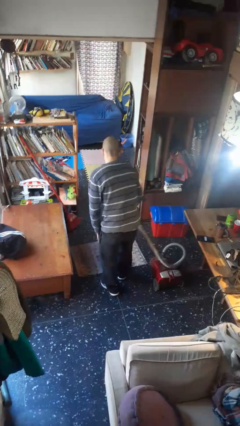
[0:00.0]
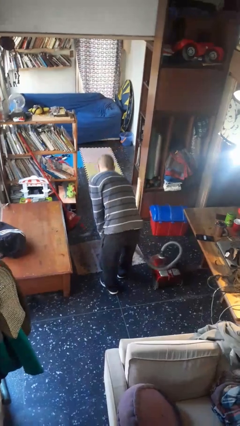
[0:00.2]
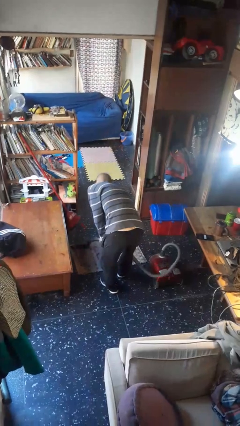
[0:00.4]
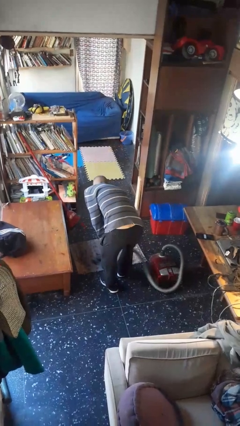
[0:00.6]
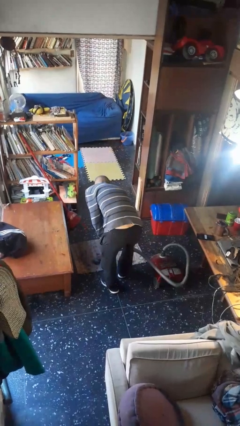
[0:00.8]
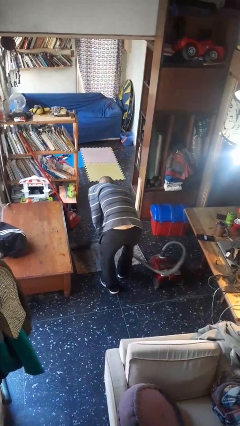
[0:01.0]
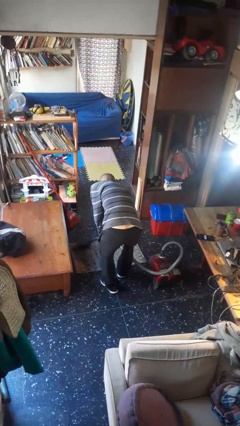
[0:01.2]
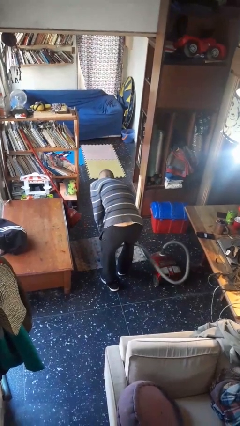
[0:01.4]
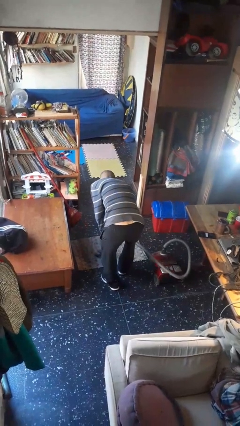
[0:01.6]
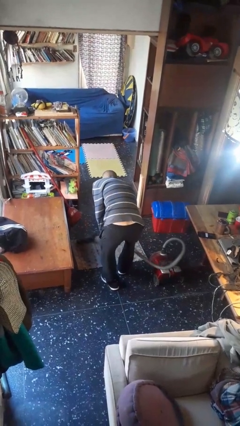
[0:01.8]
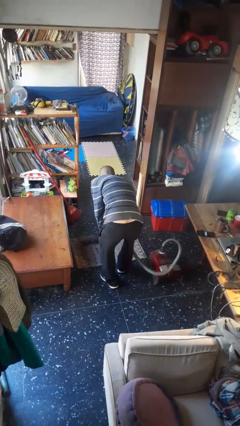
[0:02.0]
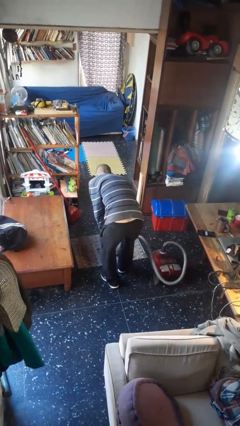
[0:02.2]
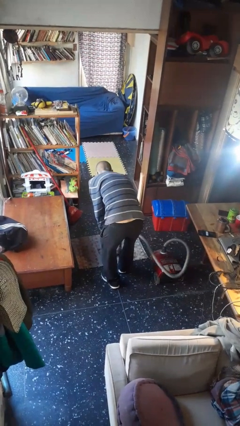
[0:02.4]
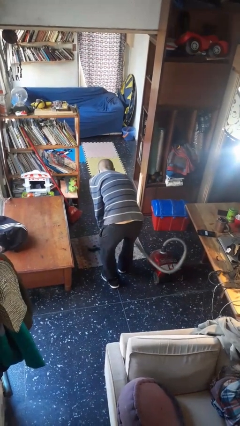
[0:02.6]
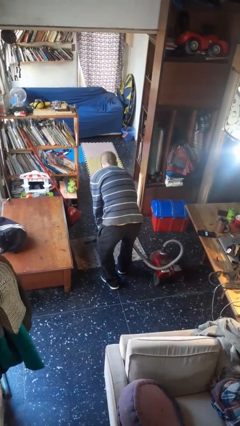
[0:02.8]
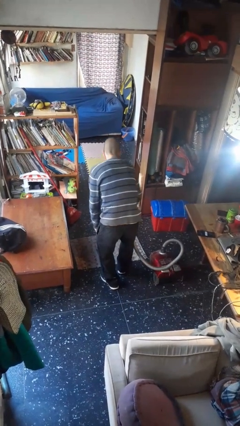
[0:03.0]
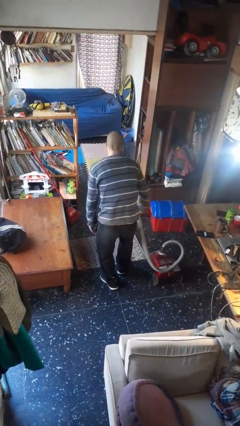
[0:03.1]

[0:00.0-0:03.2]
person vacuums carpet

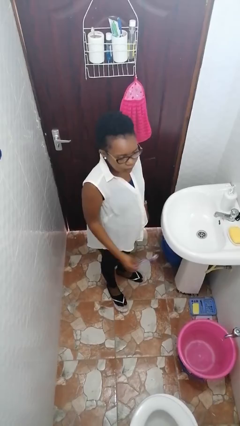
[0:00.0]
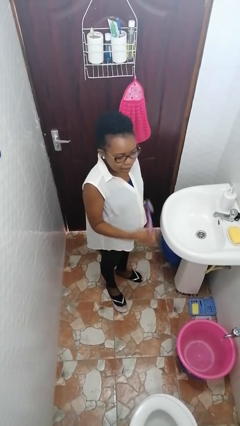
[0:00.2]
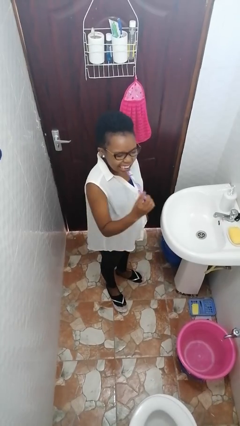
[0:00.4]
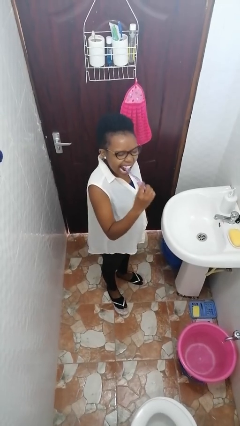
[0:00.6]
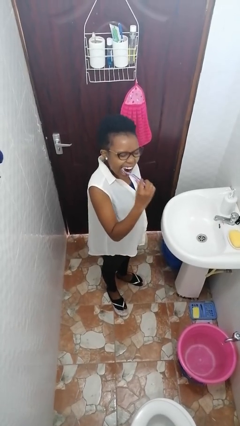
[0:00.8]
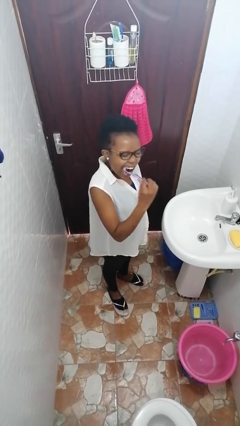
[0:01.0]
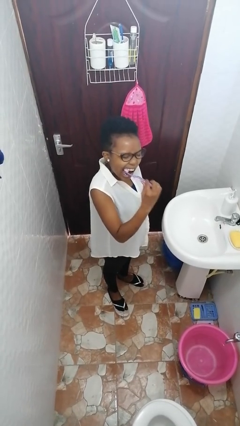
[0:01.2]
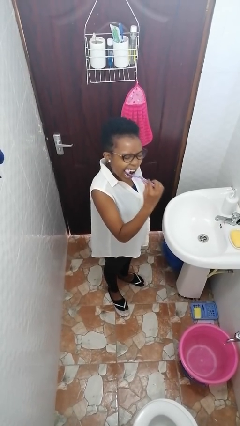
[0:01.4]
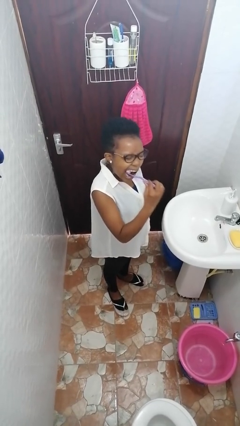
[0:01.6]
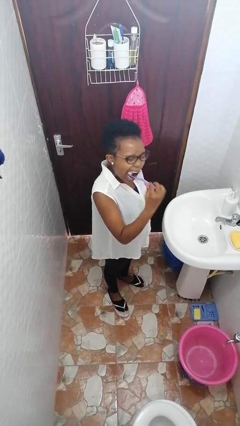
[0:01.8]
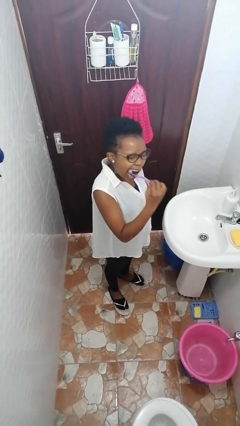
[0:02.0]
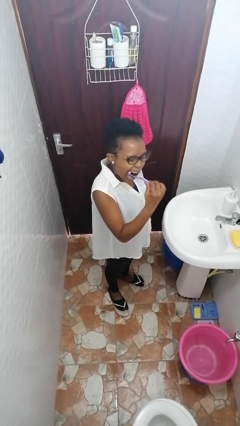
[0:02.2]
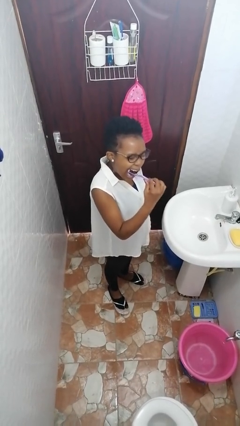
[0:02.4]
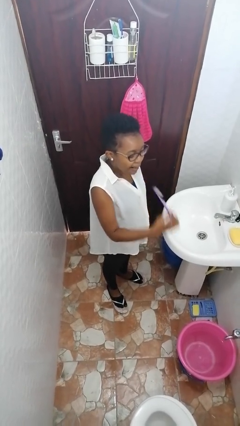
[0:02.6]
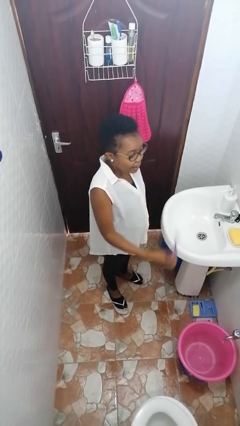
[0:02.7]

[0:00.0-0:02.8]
person brushes teeth

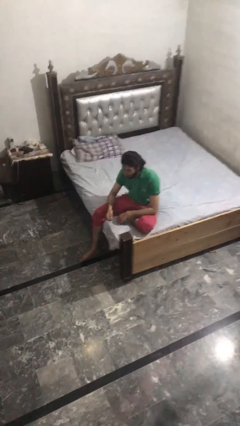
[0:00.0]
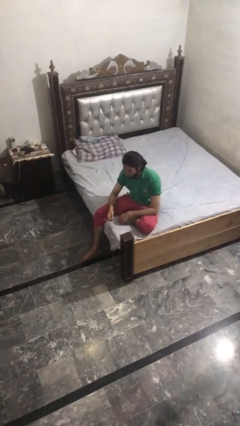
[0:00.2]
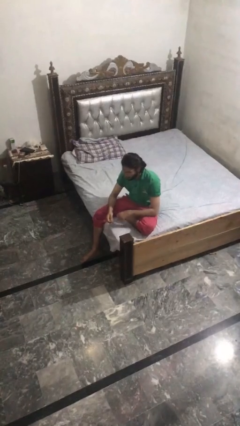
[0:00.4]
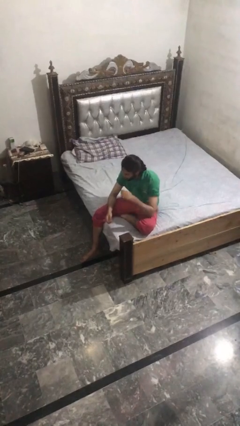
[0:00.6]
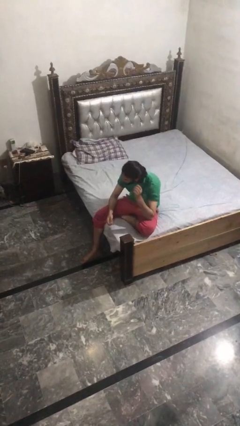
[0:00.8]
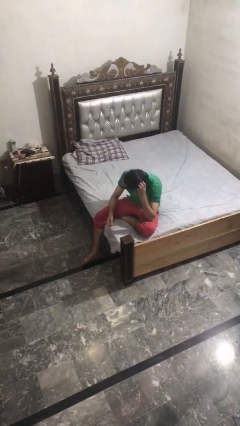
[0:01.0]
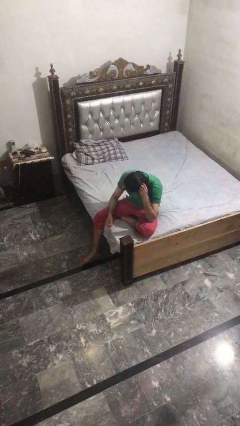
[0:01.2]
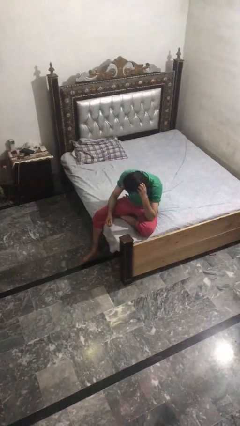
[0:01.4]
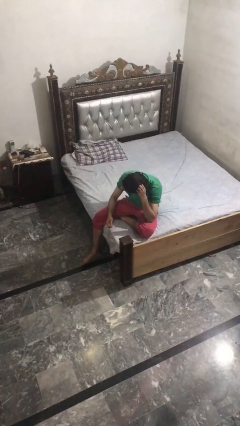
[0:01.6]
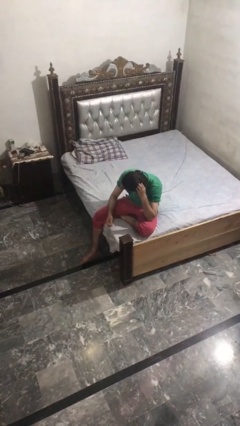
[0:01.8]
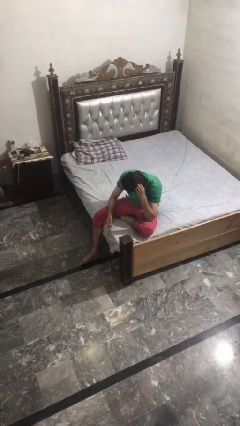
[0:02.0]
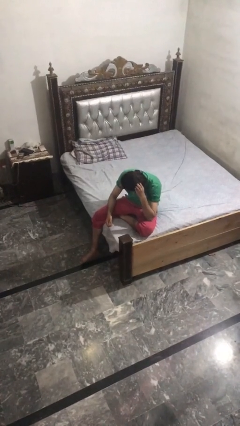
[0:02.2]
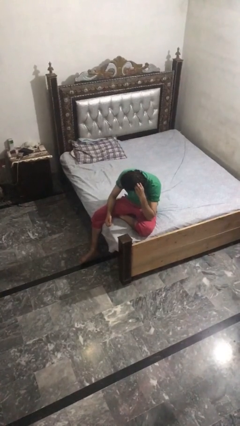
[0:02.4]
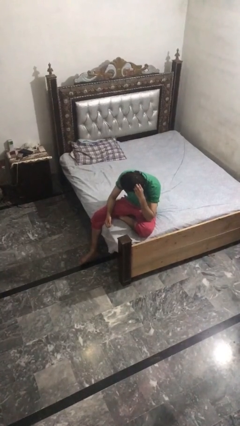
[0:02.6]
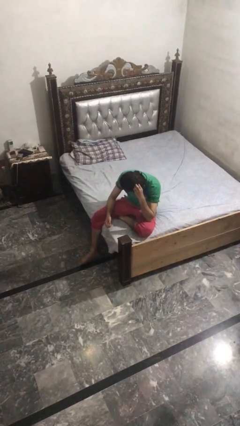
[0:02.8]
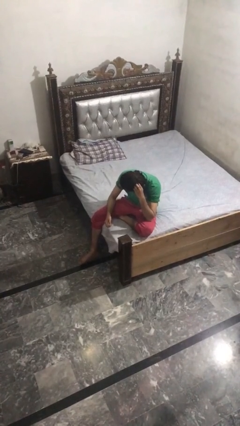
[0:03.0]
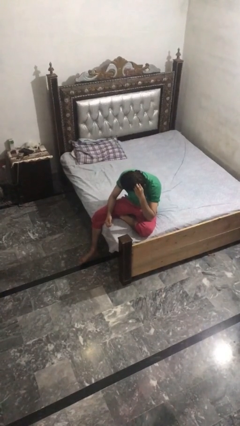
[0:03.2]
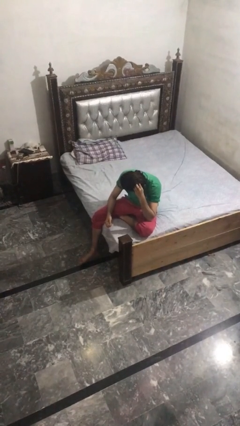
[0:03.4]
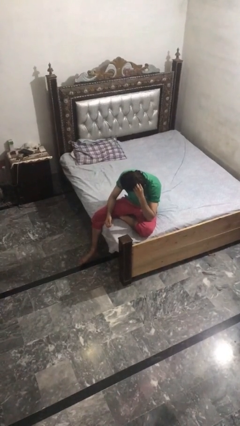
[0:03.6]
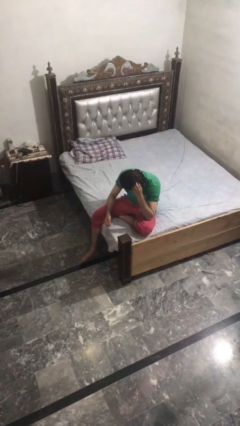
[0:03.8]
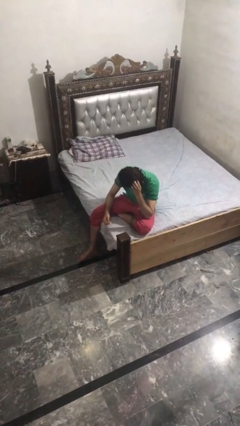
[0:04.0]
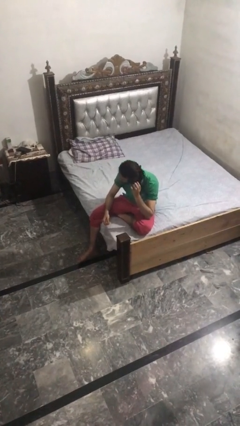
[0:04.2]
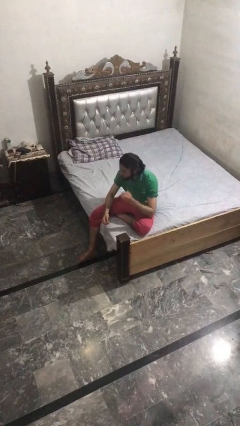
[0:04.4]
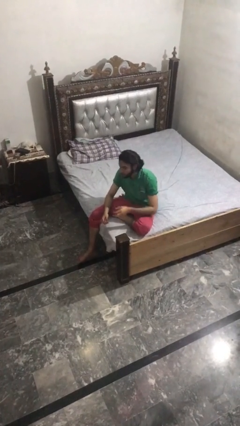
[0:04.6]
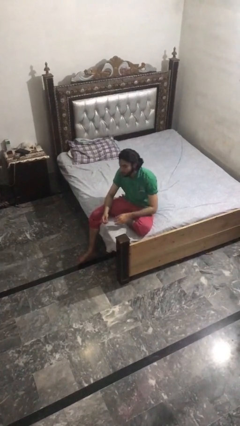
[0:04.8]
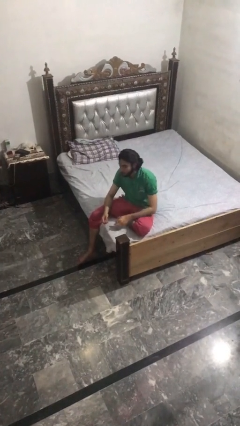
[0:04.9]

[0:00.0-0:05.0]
person scratches face

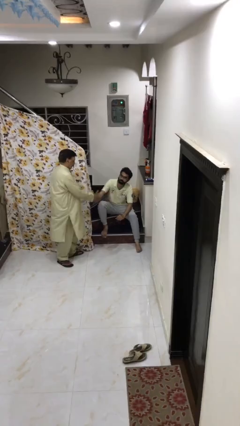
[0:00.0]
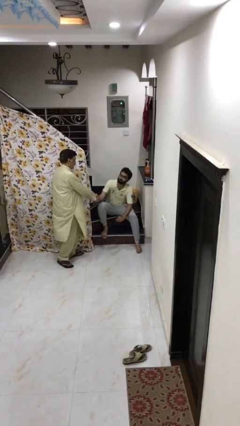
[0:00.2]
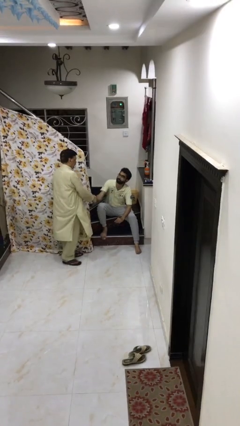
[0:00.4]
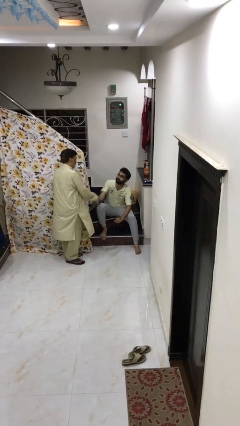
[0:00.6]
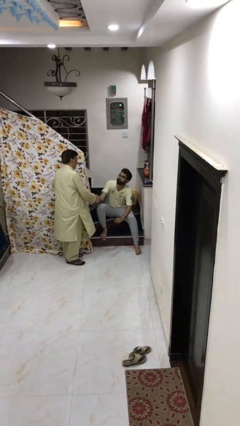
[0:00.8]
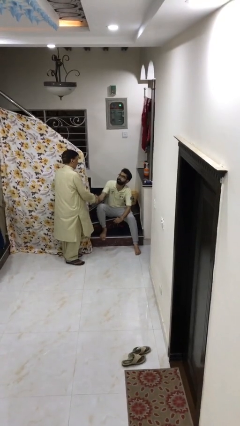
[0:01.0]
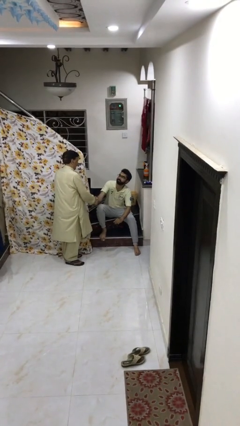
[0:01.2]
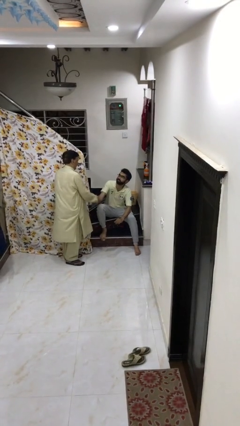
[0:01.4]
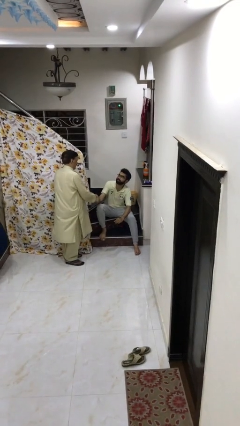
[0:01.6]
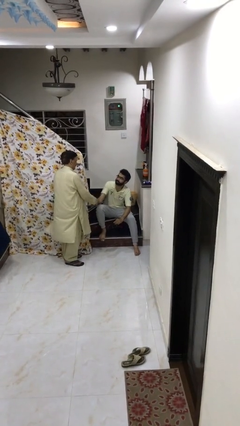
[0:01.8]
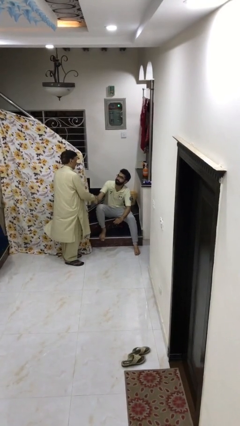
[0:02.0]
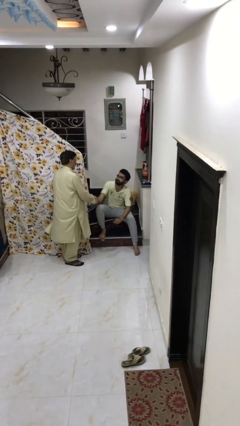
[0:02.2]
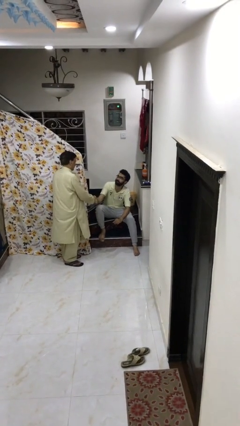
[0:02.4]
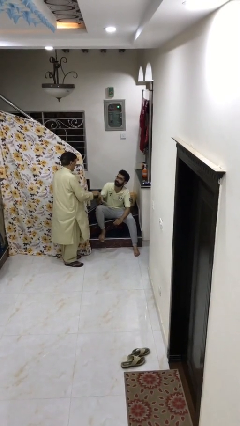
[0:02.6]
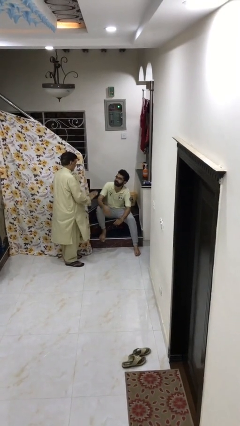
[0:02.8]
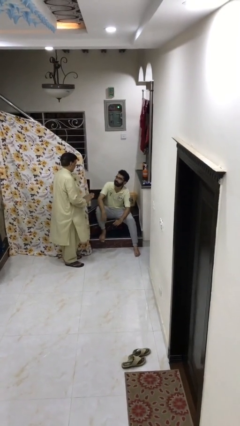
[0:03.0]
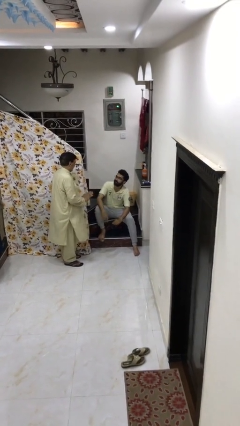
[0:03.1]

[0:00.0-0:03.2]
person shakes hand

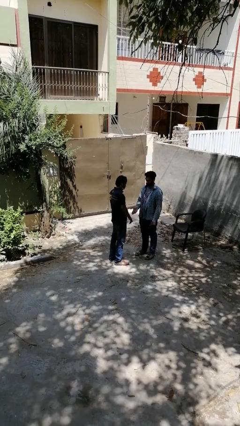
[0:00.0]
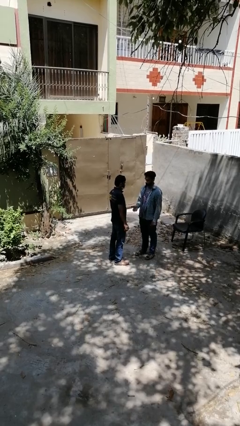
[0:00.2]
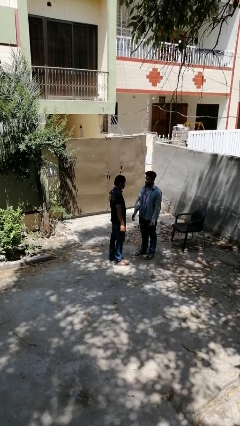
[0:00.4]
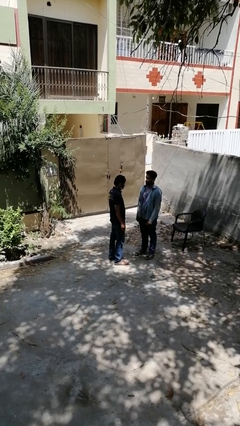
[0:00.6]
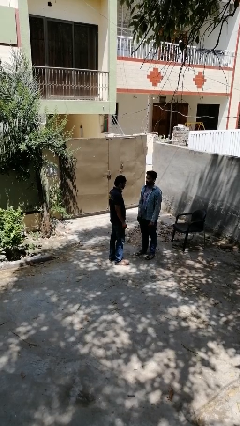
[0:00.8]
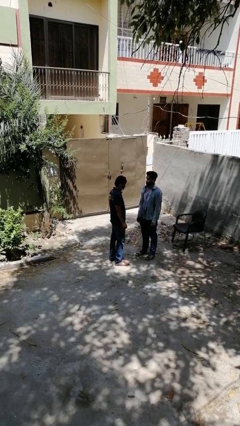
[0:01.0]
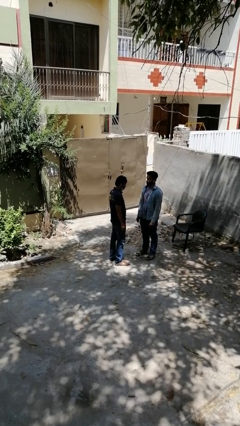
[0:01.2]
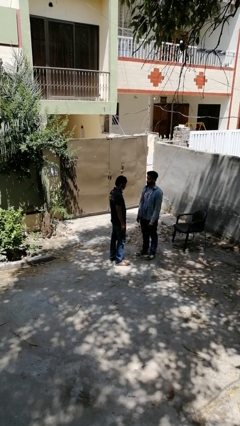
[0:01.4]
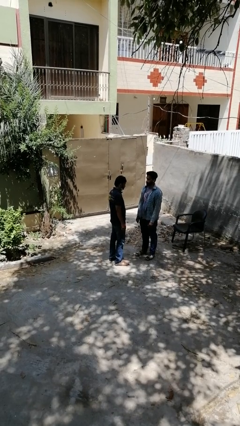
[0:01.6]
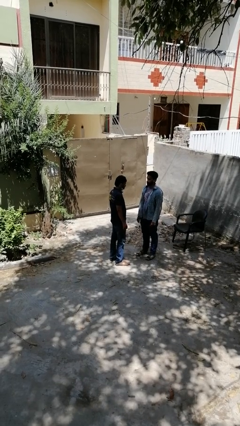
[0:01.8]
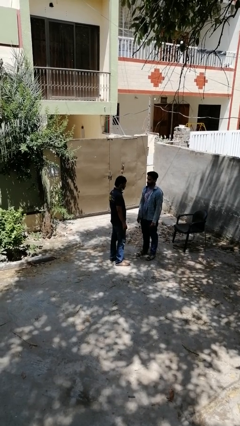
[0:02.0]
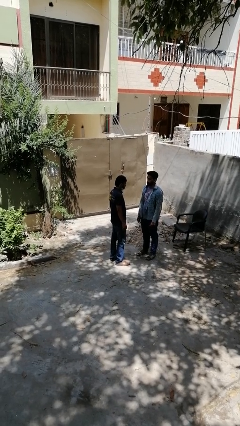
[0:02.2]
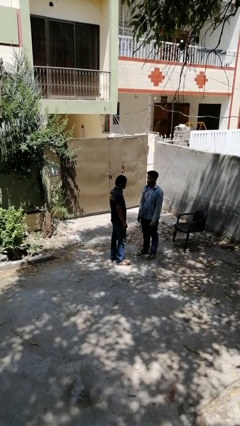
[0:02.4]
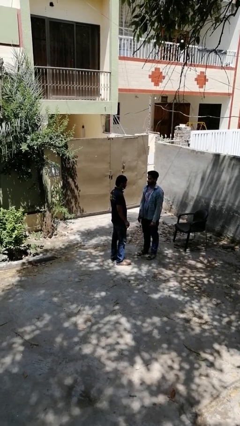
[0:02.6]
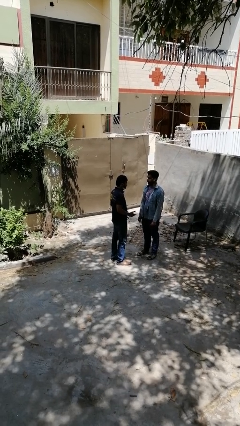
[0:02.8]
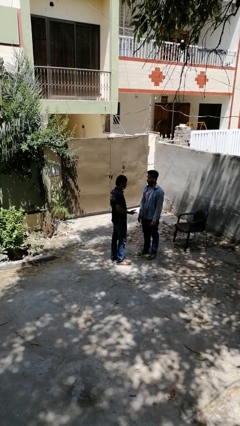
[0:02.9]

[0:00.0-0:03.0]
person highfives hand
